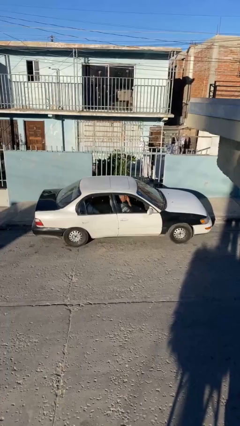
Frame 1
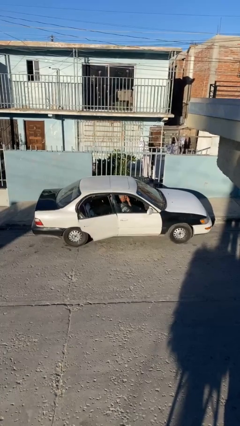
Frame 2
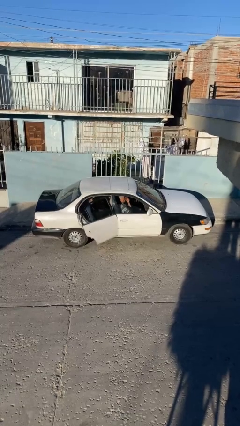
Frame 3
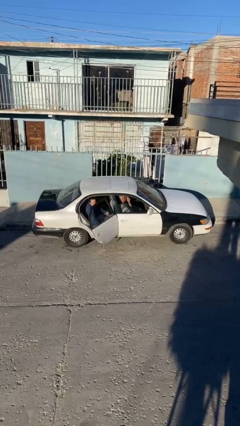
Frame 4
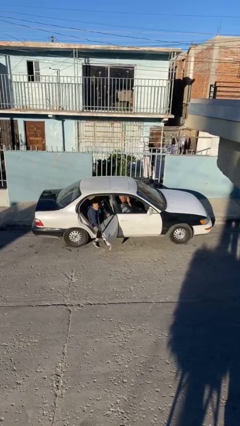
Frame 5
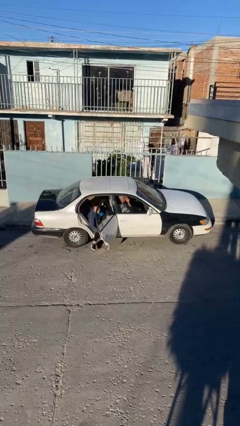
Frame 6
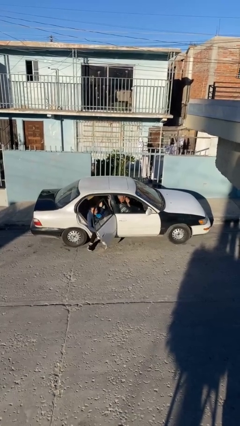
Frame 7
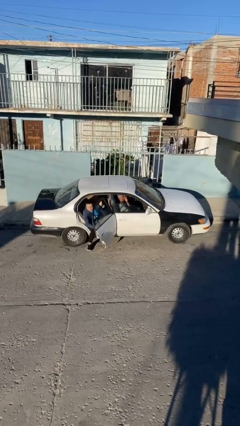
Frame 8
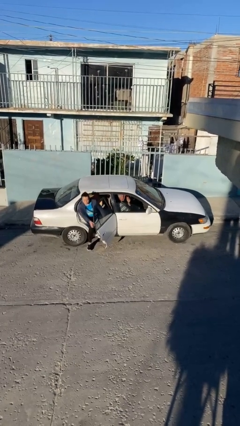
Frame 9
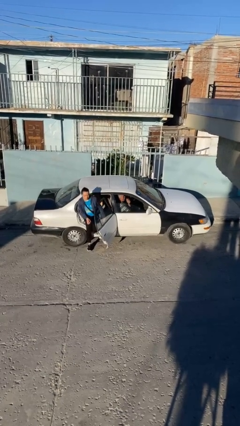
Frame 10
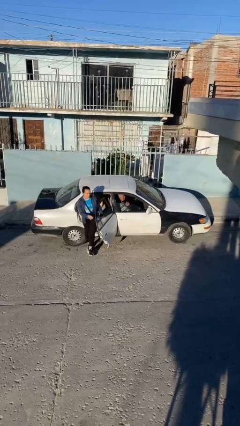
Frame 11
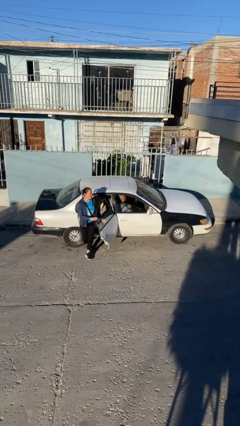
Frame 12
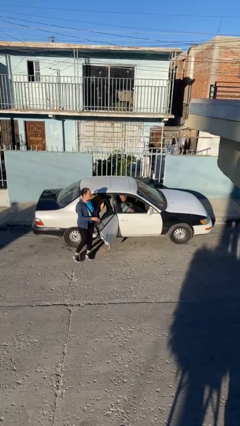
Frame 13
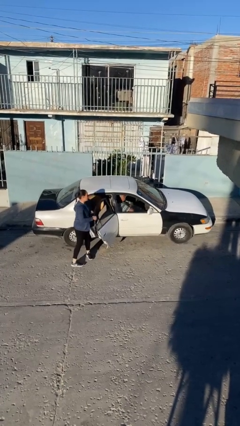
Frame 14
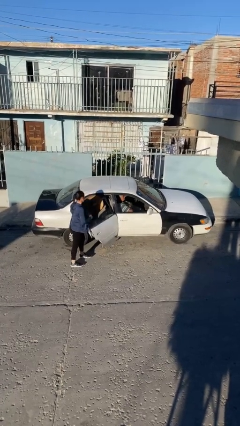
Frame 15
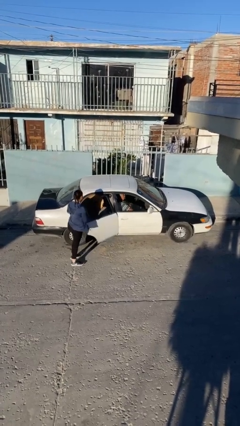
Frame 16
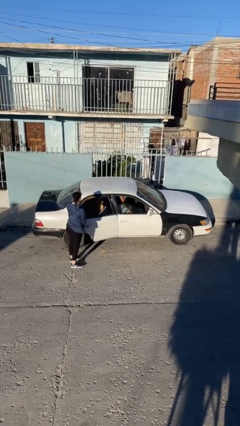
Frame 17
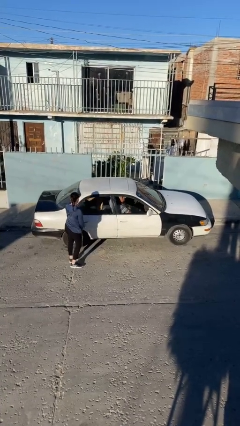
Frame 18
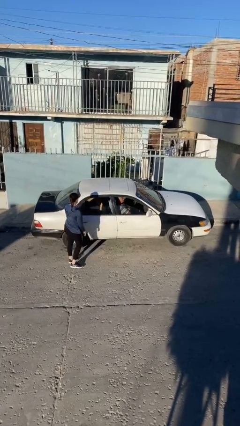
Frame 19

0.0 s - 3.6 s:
car drops off person

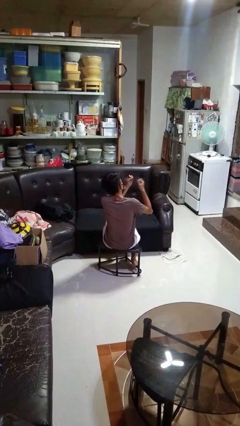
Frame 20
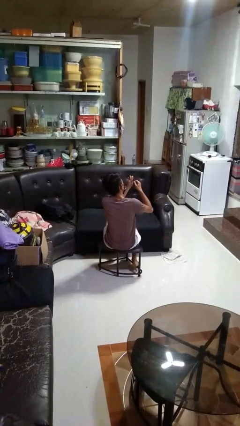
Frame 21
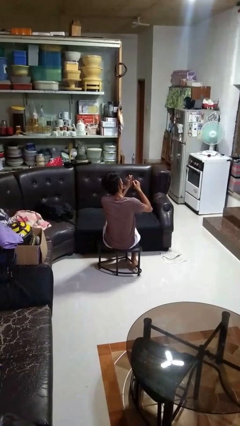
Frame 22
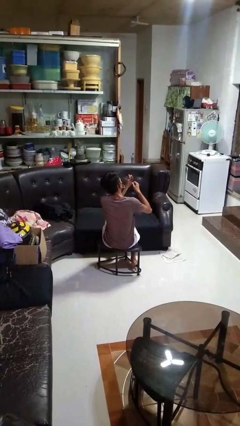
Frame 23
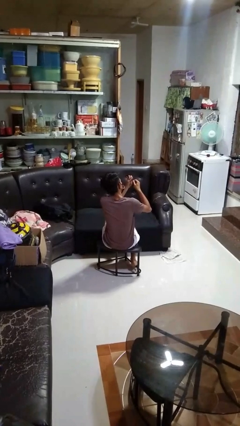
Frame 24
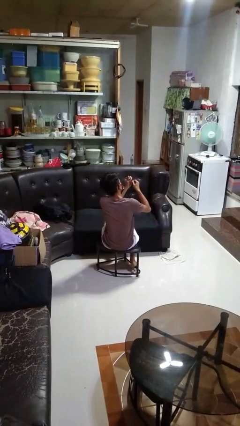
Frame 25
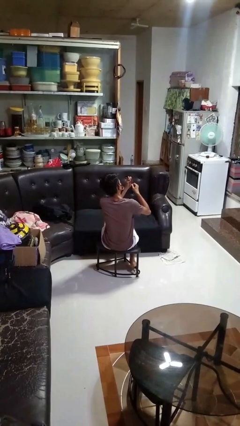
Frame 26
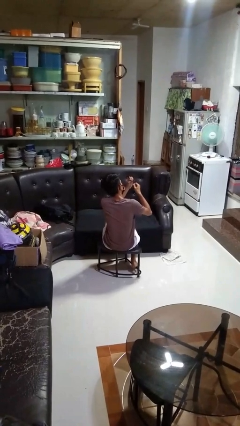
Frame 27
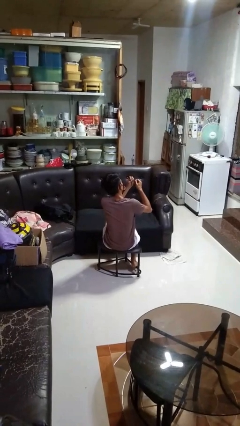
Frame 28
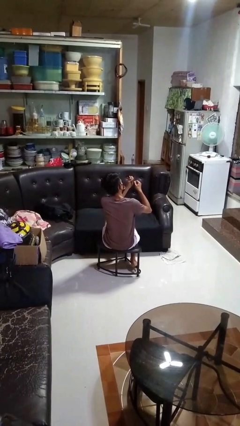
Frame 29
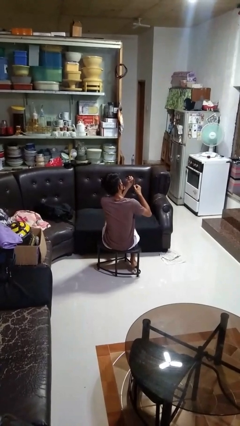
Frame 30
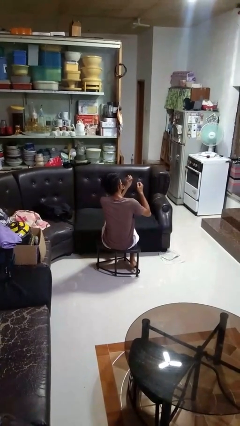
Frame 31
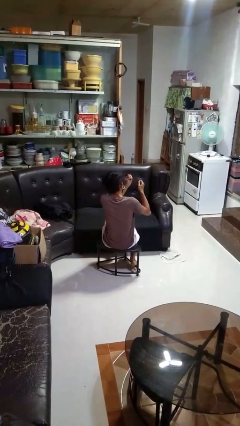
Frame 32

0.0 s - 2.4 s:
person files fingernails

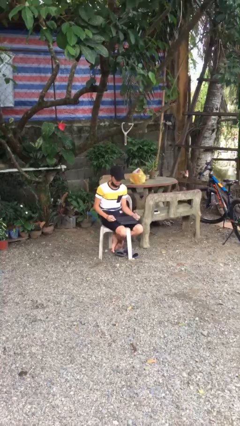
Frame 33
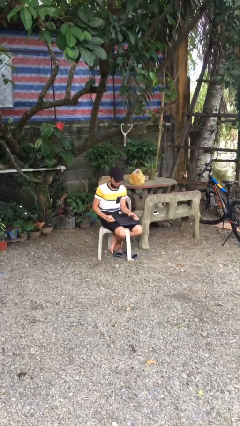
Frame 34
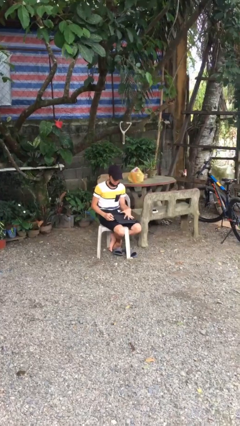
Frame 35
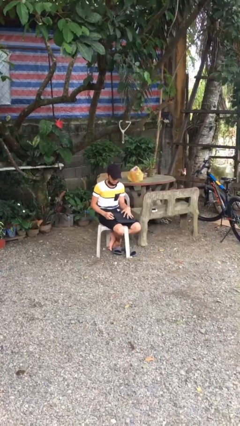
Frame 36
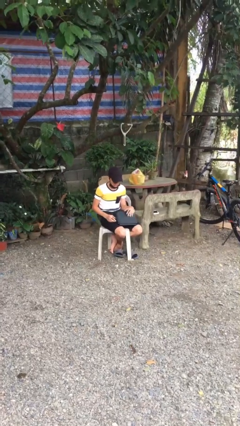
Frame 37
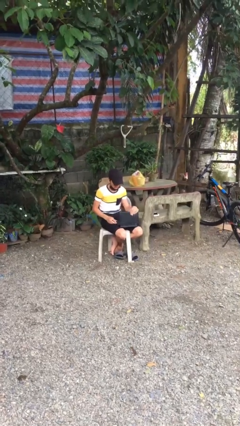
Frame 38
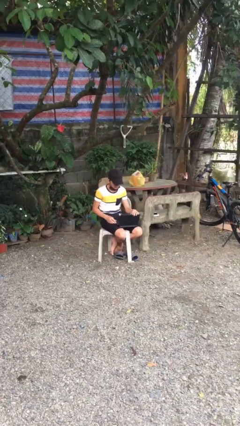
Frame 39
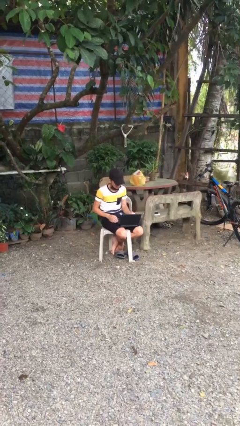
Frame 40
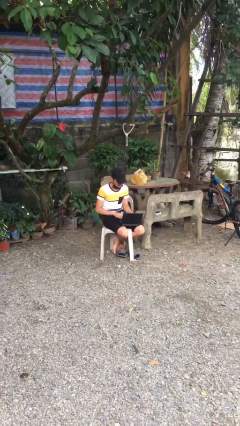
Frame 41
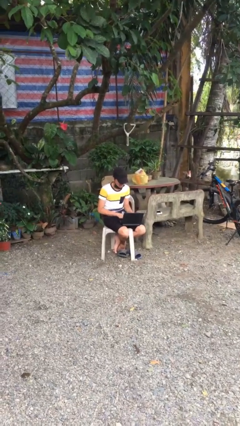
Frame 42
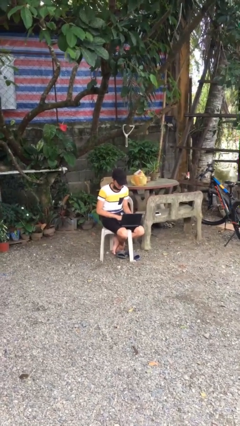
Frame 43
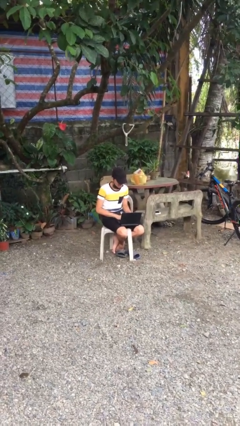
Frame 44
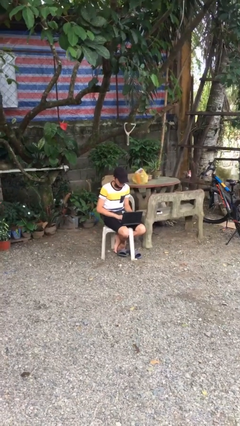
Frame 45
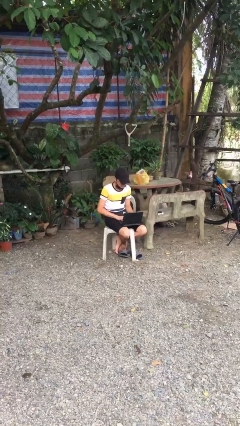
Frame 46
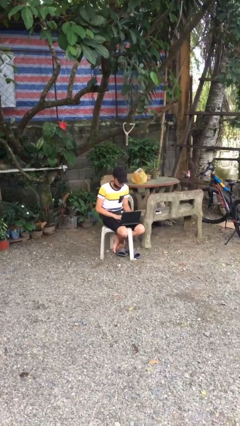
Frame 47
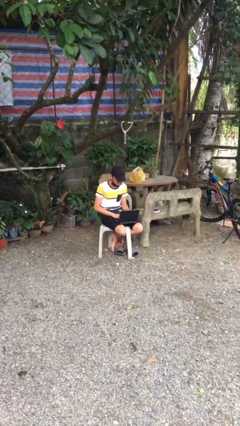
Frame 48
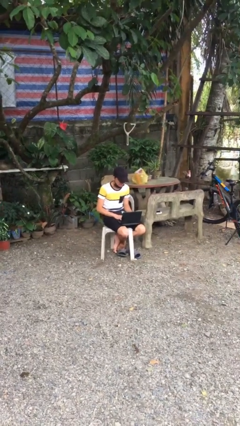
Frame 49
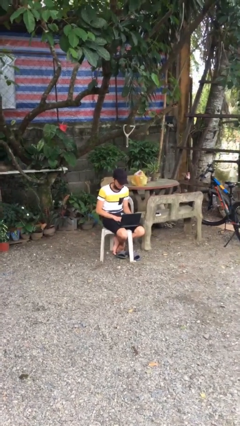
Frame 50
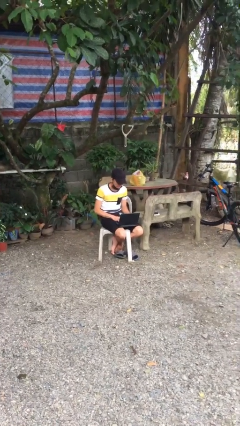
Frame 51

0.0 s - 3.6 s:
person interacts with laptop

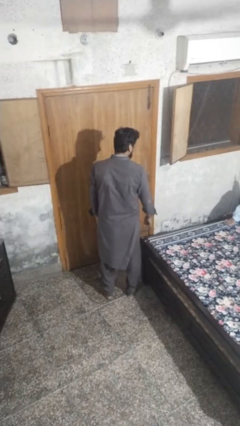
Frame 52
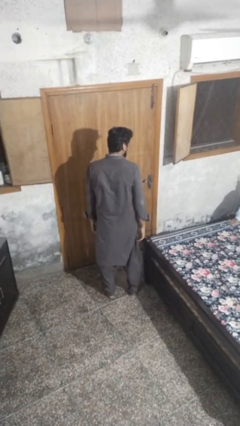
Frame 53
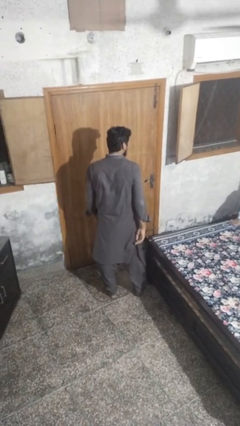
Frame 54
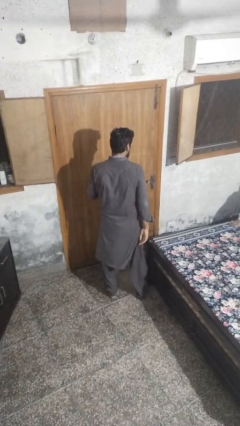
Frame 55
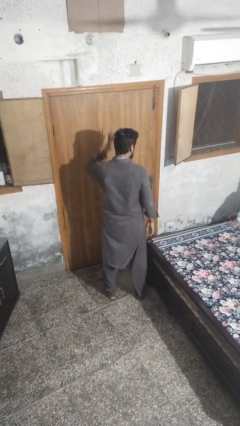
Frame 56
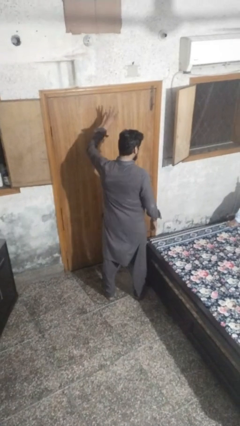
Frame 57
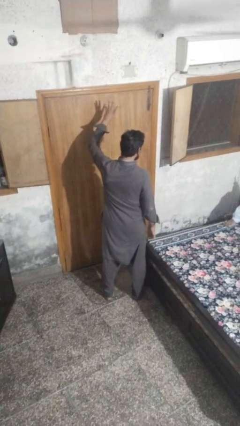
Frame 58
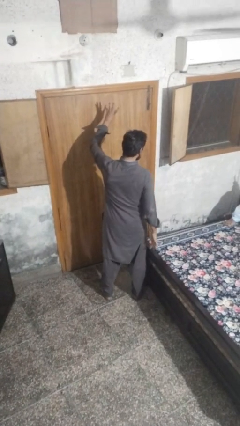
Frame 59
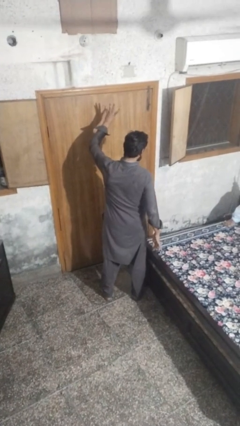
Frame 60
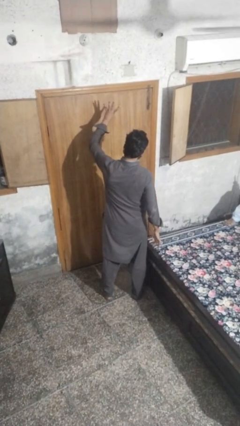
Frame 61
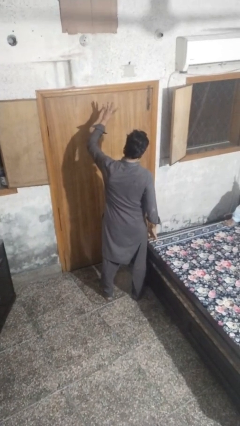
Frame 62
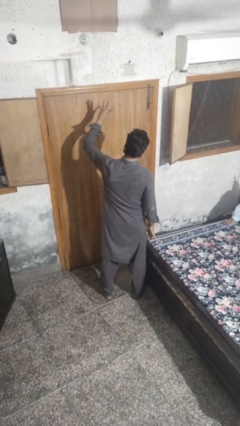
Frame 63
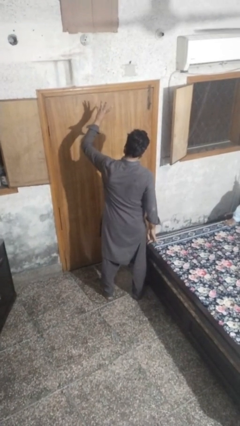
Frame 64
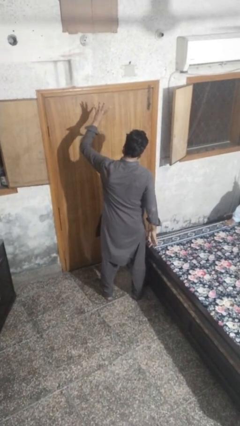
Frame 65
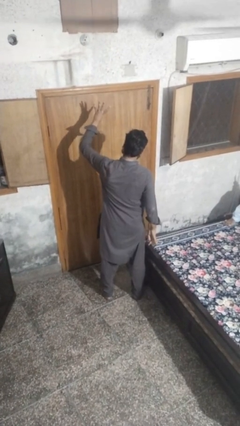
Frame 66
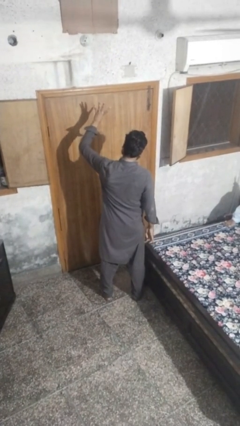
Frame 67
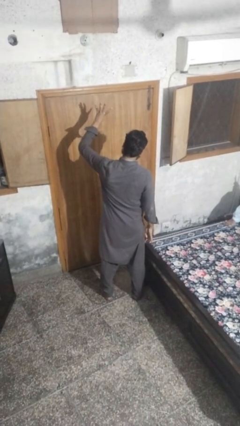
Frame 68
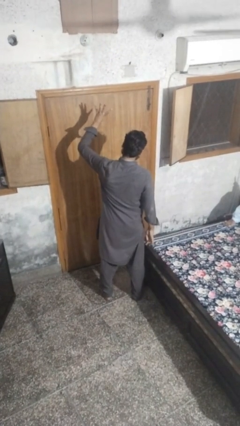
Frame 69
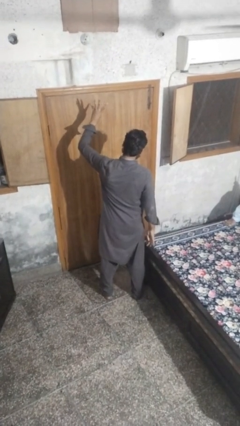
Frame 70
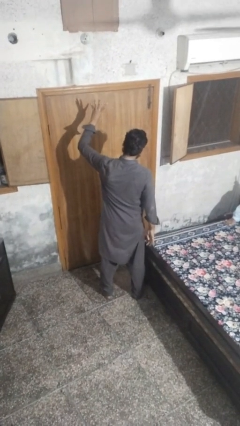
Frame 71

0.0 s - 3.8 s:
person gestures number four

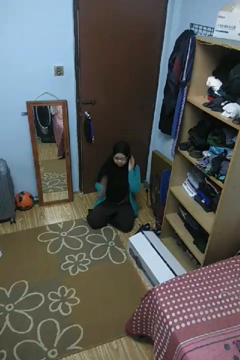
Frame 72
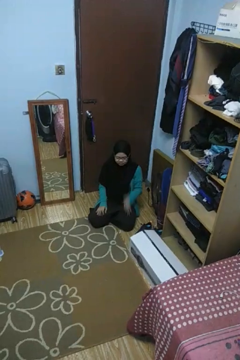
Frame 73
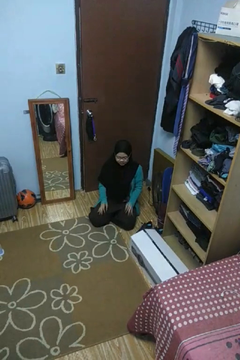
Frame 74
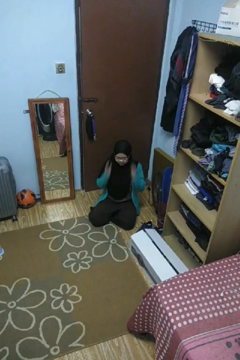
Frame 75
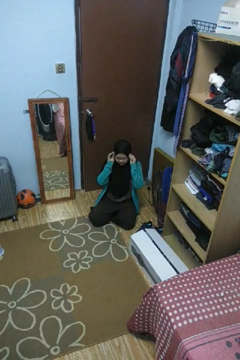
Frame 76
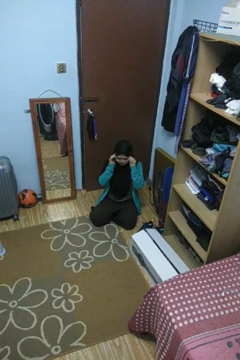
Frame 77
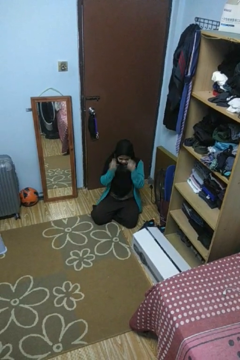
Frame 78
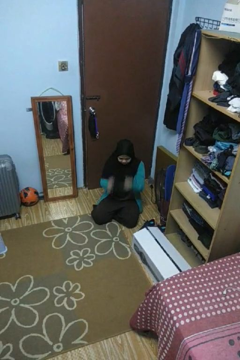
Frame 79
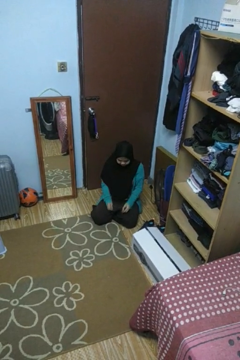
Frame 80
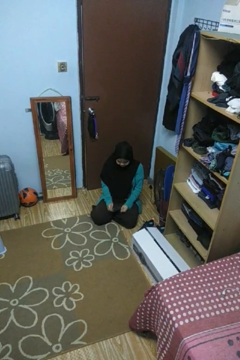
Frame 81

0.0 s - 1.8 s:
person takes off glasses

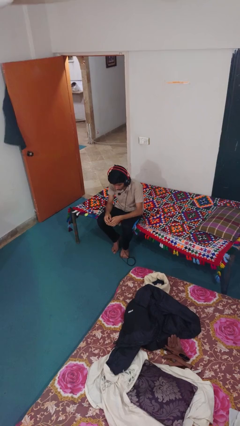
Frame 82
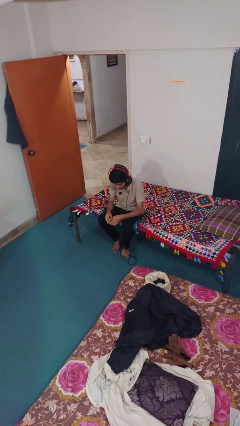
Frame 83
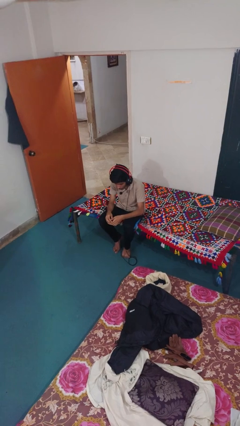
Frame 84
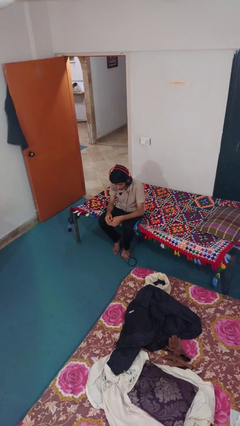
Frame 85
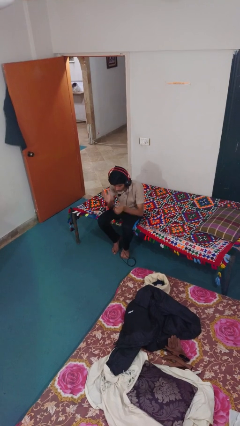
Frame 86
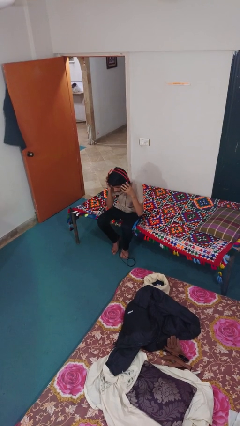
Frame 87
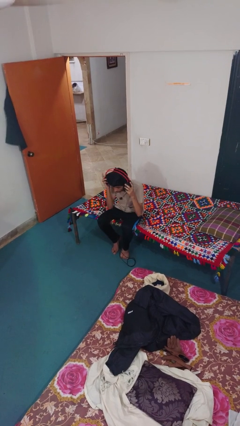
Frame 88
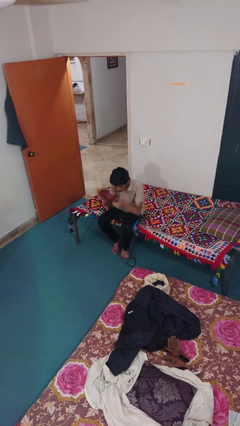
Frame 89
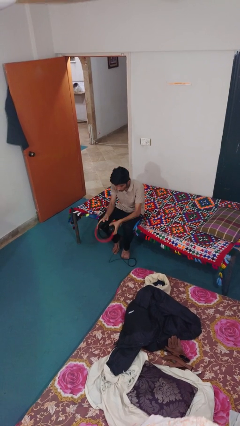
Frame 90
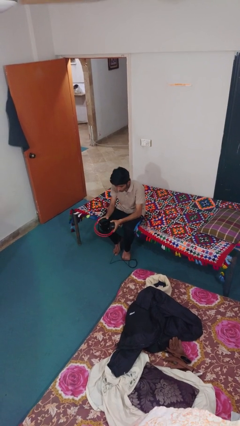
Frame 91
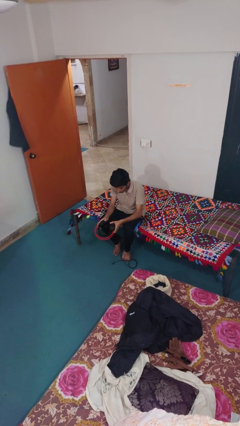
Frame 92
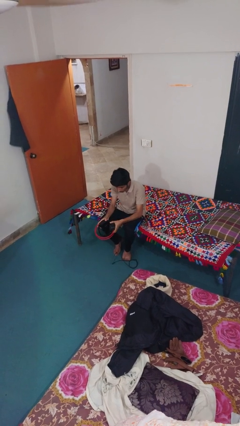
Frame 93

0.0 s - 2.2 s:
person takes off headphones

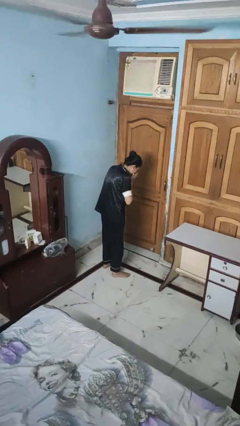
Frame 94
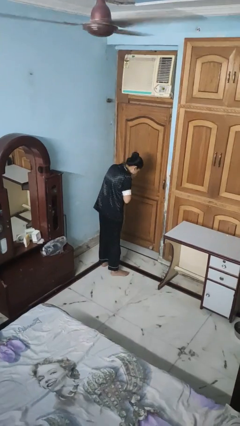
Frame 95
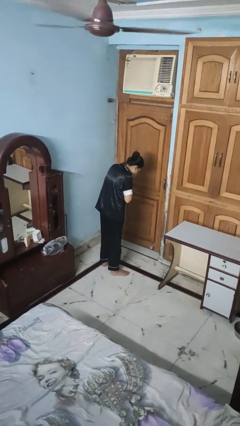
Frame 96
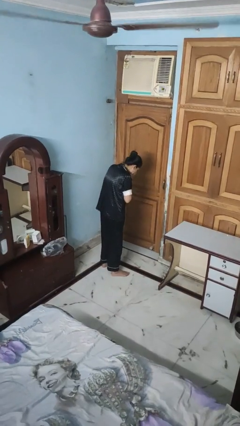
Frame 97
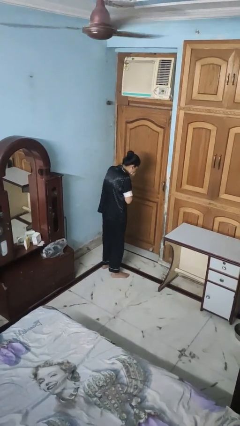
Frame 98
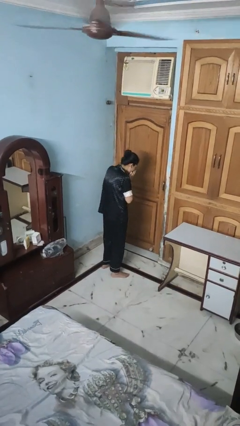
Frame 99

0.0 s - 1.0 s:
person sneezes into hand
